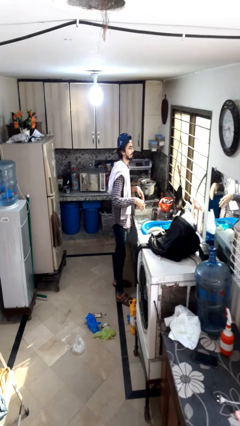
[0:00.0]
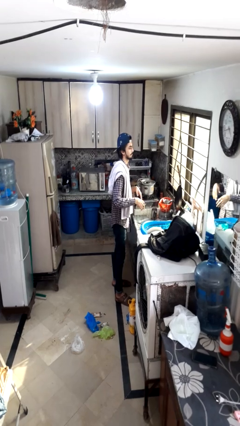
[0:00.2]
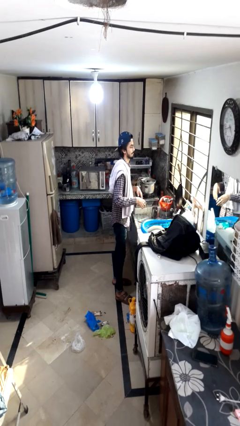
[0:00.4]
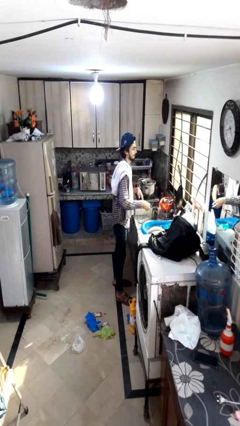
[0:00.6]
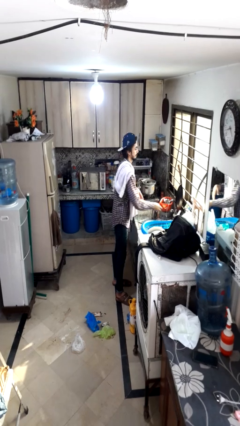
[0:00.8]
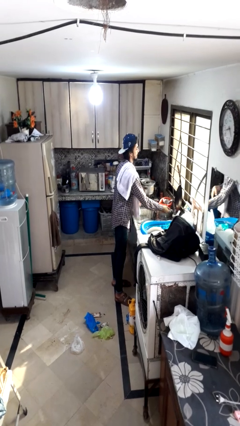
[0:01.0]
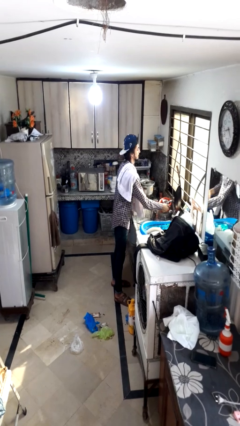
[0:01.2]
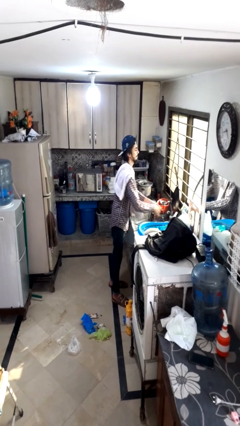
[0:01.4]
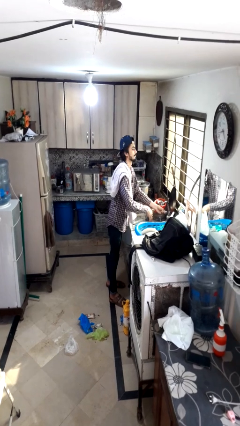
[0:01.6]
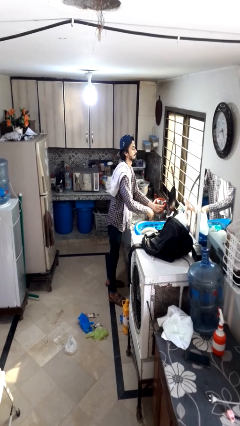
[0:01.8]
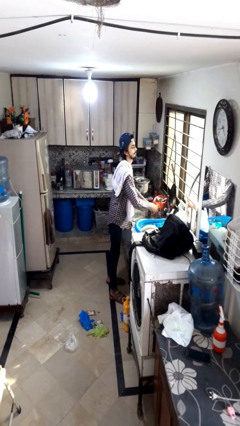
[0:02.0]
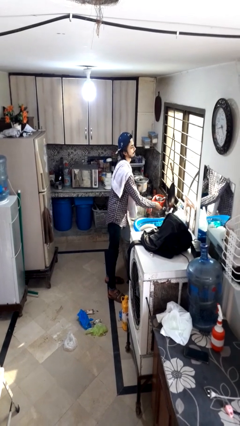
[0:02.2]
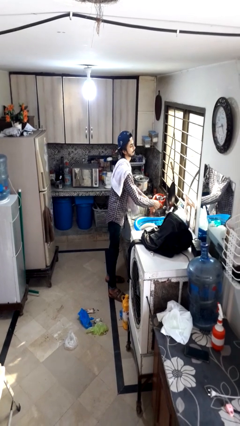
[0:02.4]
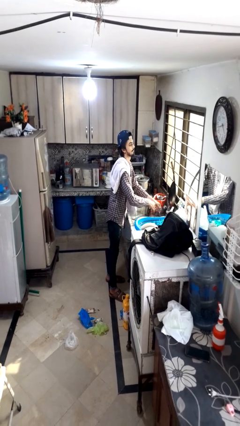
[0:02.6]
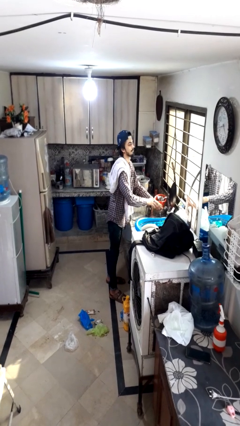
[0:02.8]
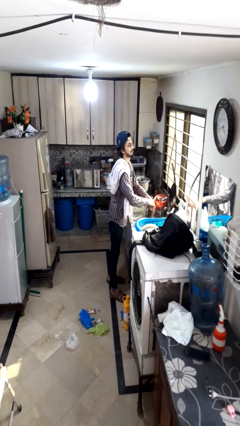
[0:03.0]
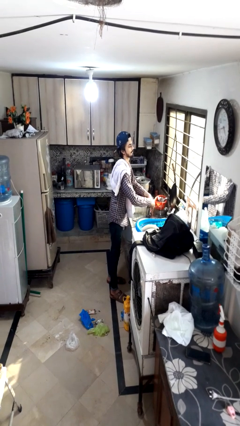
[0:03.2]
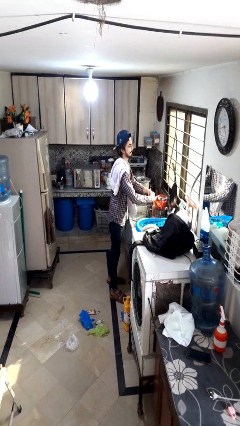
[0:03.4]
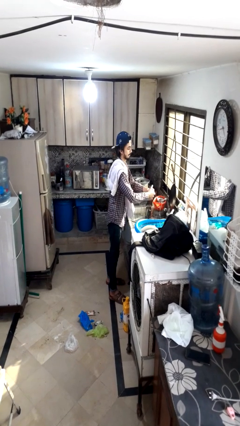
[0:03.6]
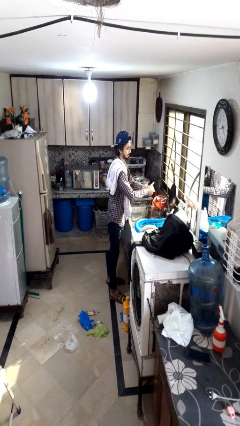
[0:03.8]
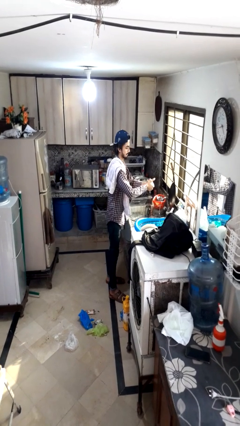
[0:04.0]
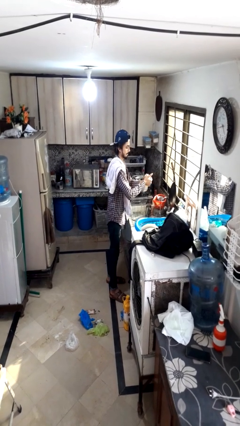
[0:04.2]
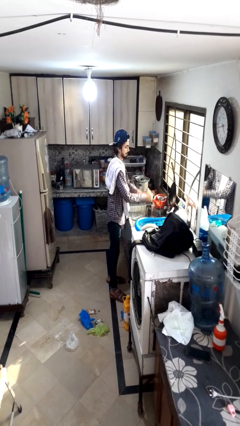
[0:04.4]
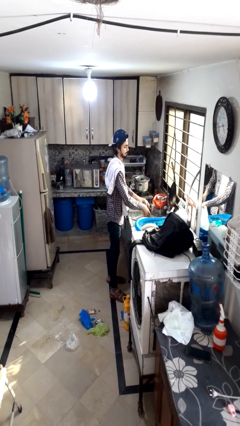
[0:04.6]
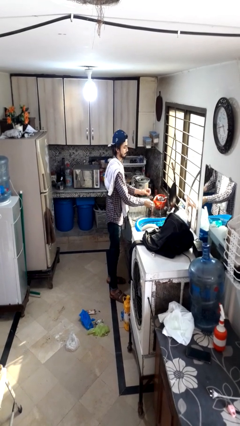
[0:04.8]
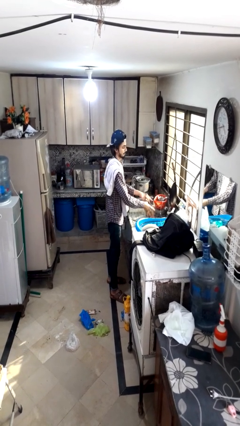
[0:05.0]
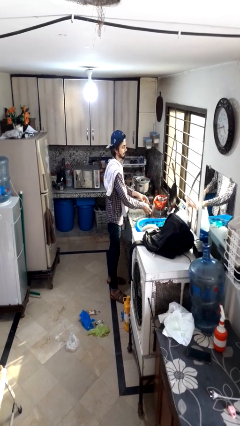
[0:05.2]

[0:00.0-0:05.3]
person washes hands

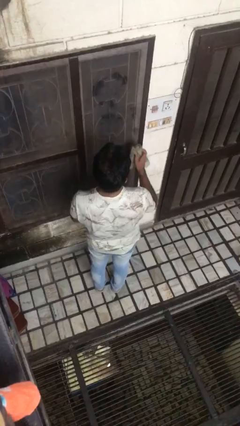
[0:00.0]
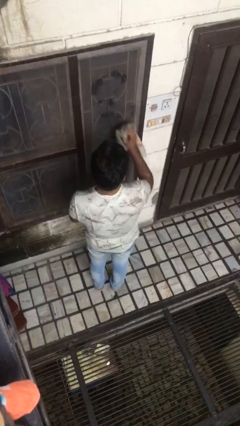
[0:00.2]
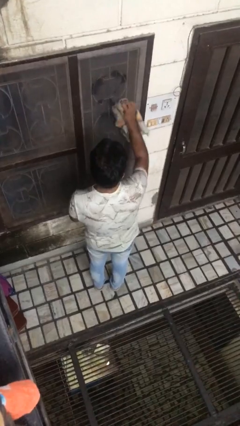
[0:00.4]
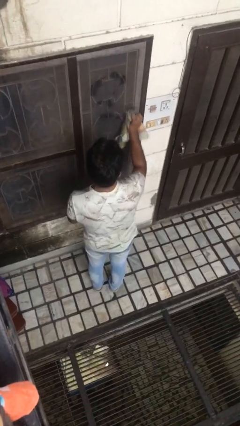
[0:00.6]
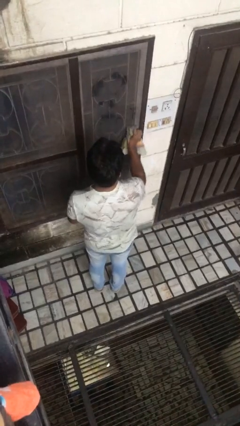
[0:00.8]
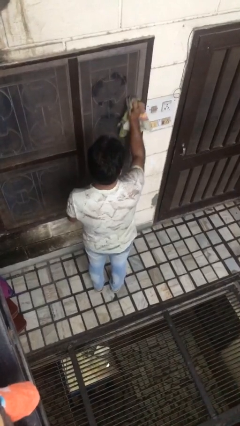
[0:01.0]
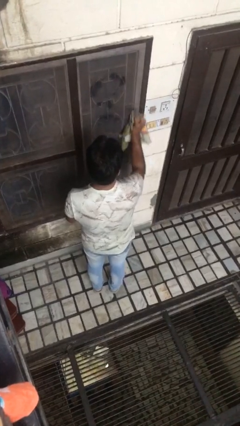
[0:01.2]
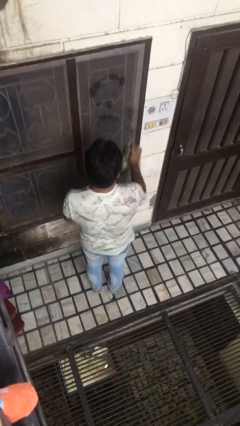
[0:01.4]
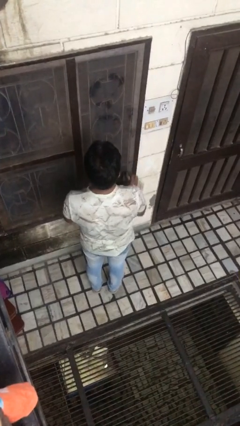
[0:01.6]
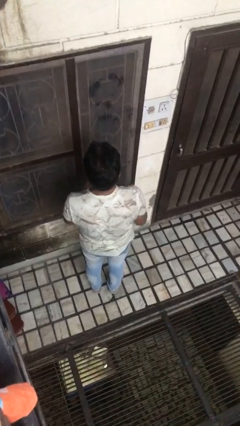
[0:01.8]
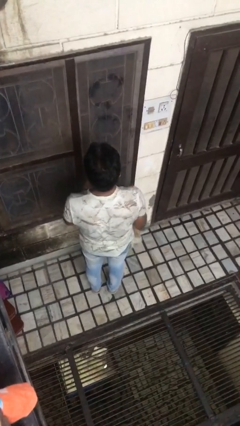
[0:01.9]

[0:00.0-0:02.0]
person washes window

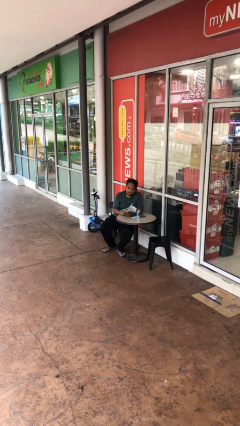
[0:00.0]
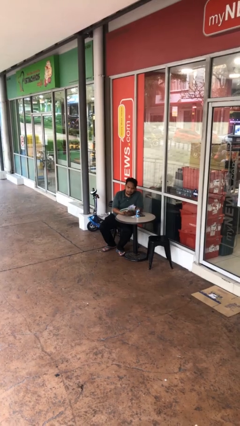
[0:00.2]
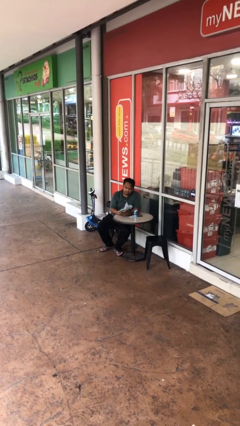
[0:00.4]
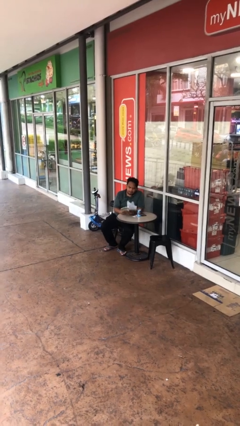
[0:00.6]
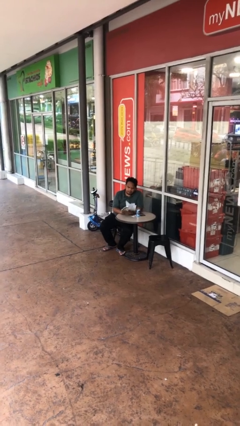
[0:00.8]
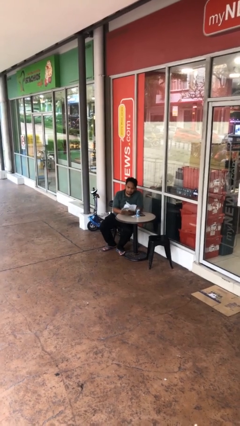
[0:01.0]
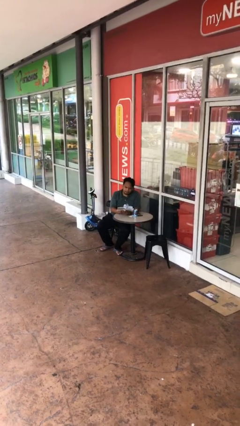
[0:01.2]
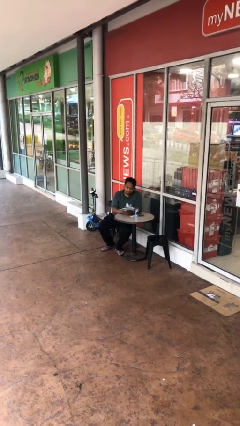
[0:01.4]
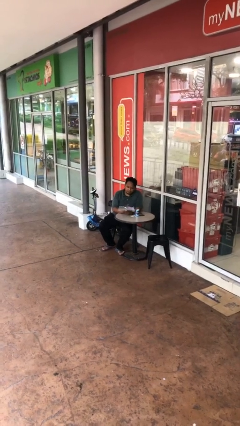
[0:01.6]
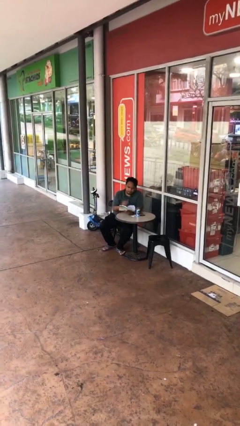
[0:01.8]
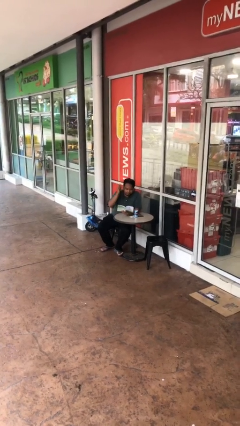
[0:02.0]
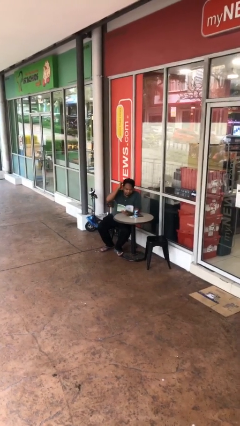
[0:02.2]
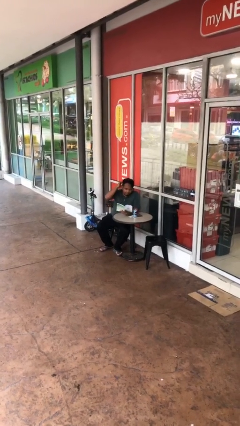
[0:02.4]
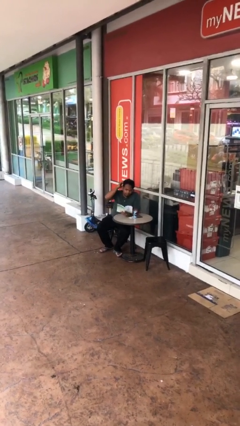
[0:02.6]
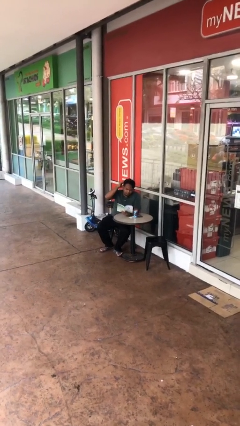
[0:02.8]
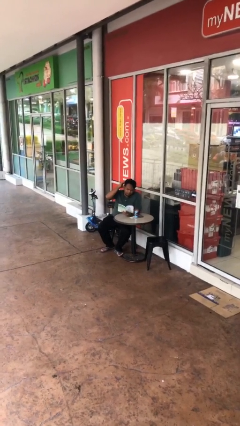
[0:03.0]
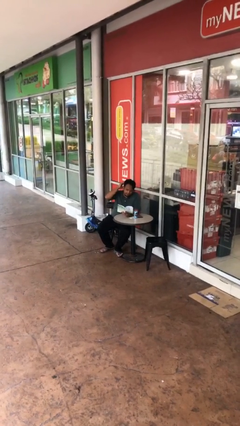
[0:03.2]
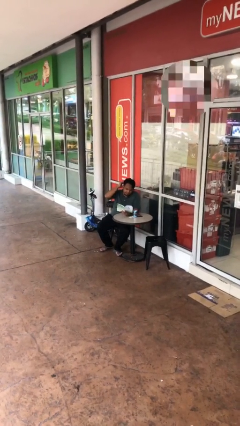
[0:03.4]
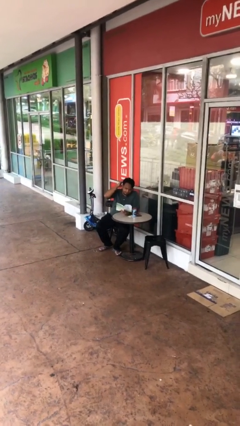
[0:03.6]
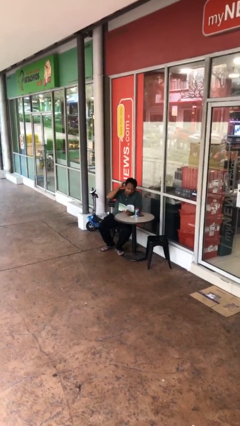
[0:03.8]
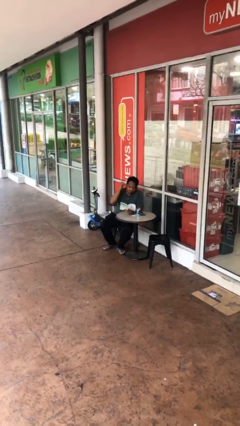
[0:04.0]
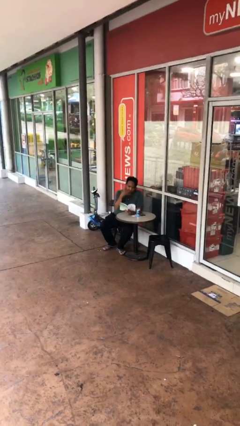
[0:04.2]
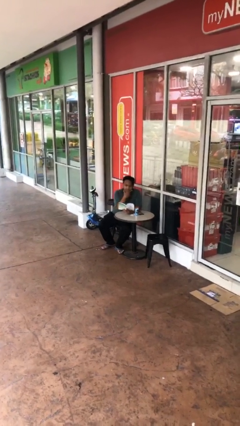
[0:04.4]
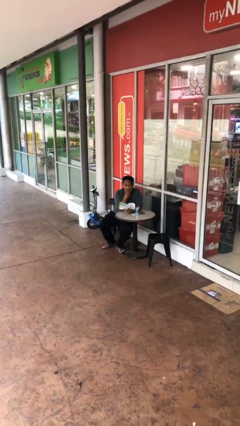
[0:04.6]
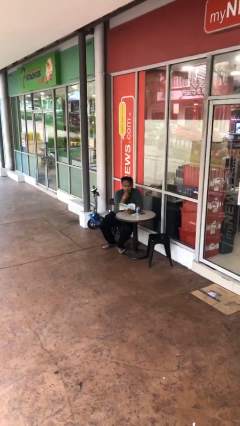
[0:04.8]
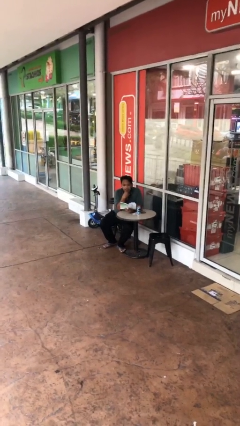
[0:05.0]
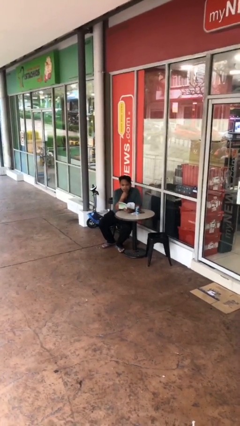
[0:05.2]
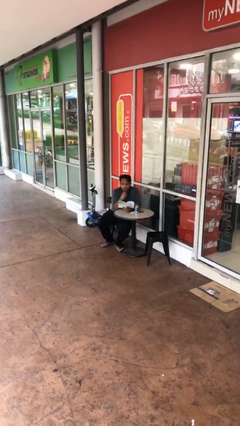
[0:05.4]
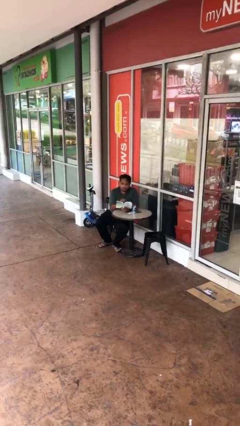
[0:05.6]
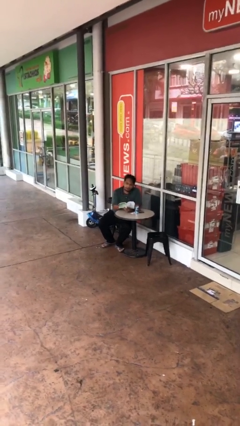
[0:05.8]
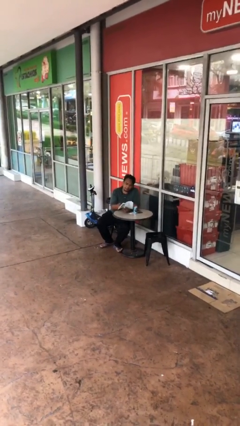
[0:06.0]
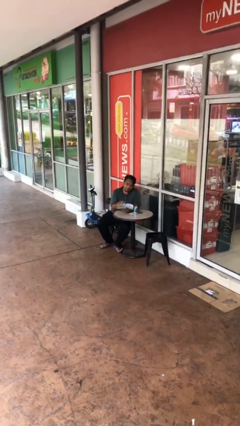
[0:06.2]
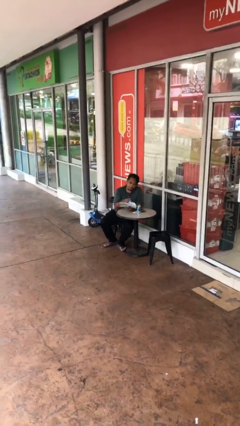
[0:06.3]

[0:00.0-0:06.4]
person reads document

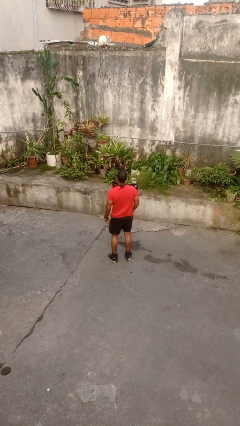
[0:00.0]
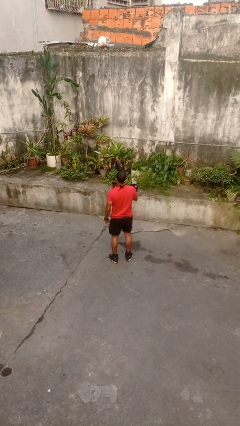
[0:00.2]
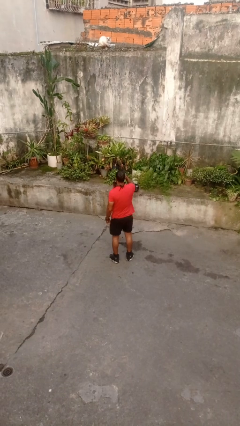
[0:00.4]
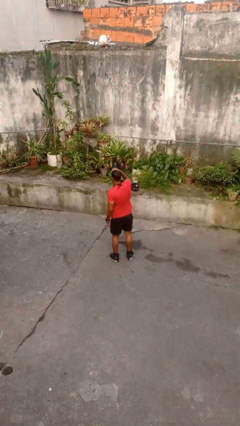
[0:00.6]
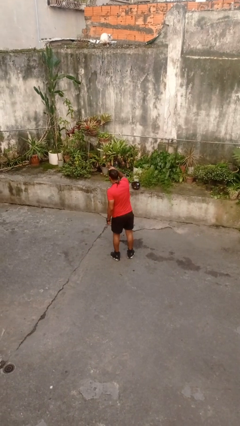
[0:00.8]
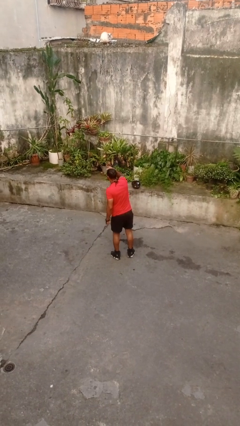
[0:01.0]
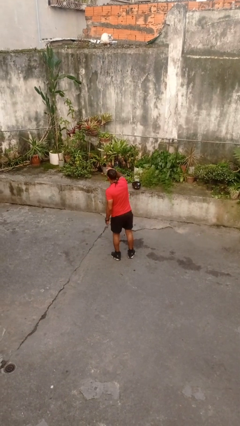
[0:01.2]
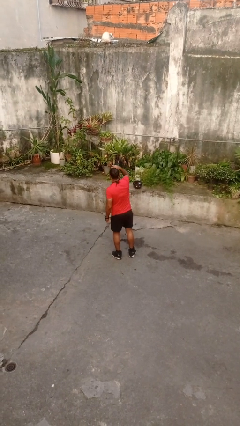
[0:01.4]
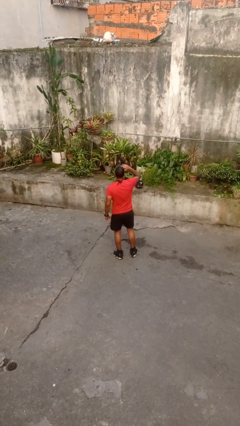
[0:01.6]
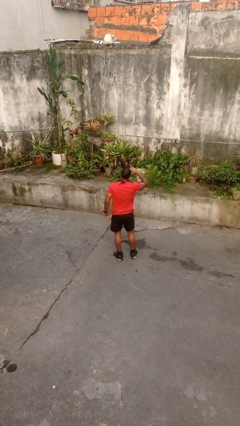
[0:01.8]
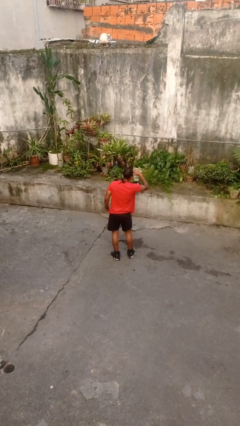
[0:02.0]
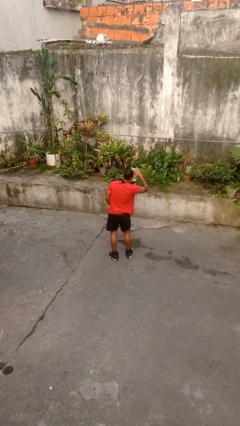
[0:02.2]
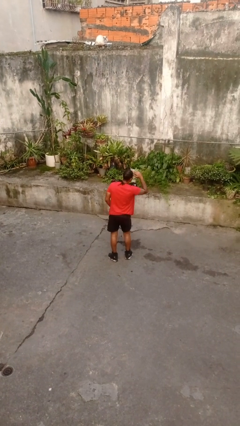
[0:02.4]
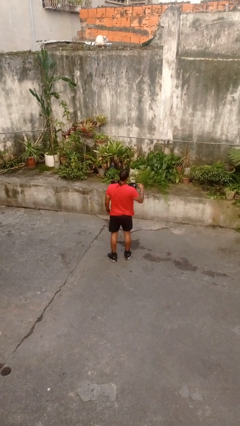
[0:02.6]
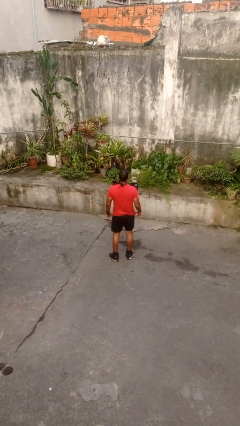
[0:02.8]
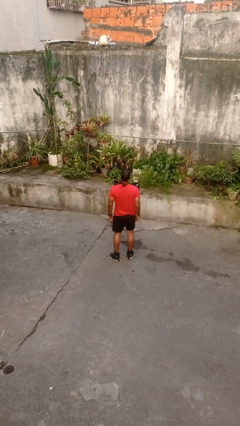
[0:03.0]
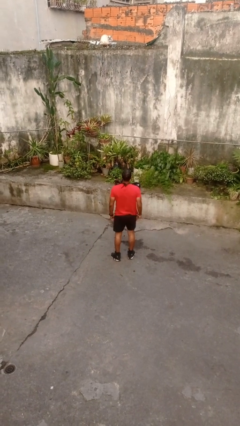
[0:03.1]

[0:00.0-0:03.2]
person shades eyes

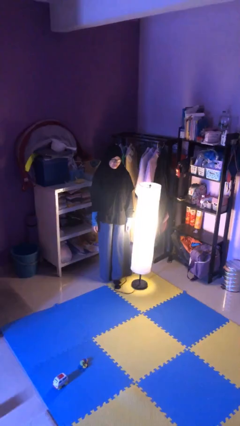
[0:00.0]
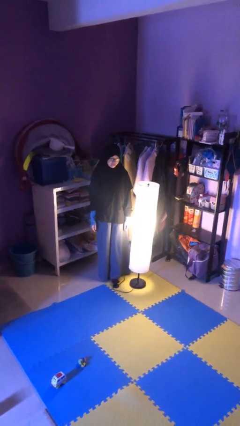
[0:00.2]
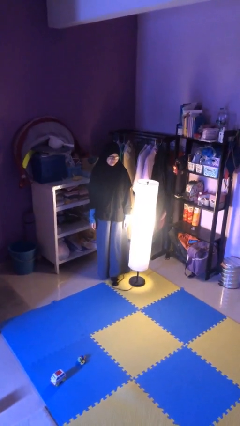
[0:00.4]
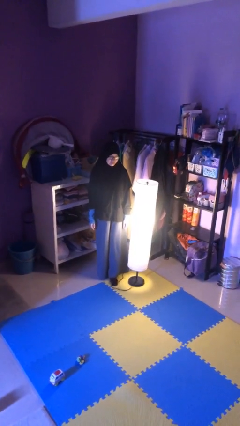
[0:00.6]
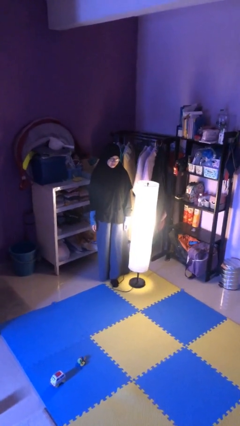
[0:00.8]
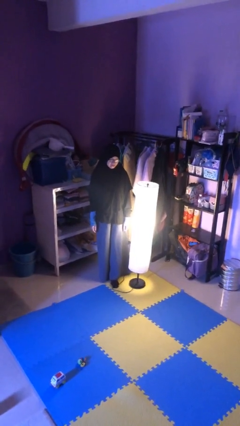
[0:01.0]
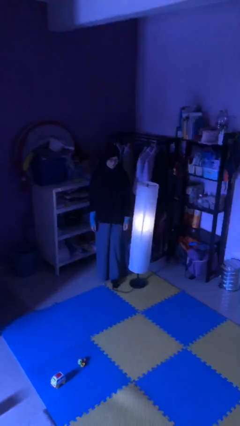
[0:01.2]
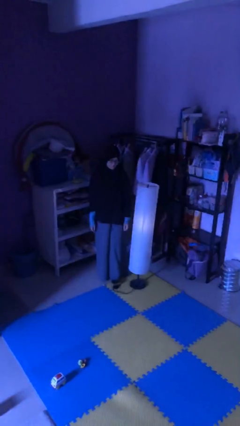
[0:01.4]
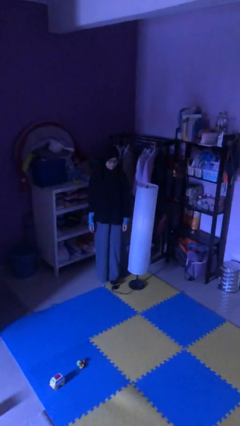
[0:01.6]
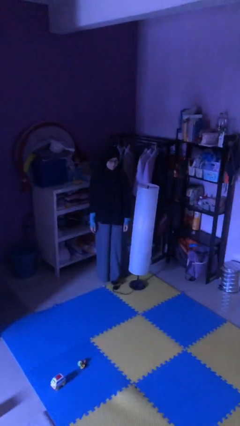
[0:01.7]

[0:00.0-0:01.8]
person turns off lamp
